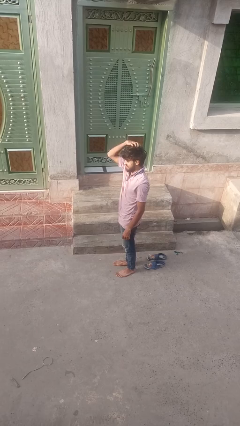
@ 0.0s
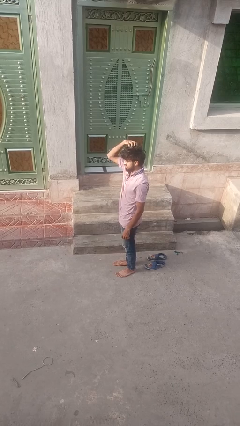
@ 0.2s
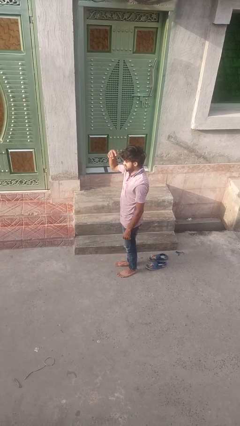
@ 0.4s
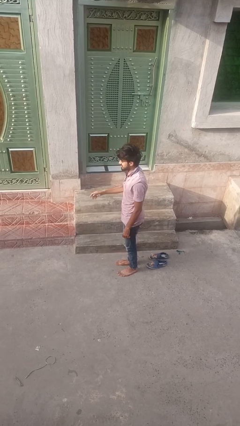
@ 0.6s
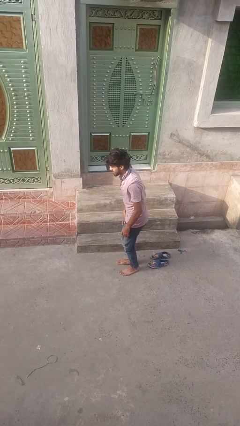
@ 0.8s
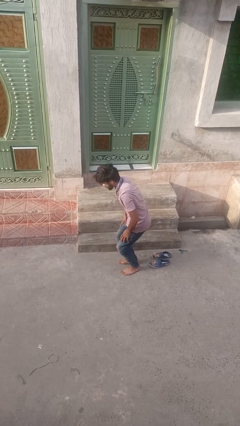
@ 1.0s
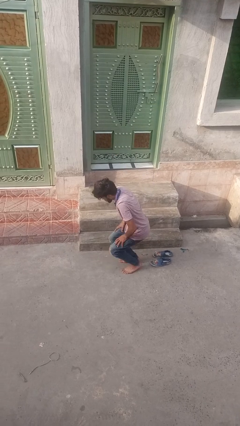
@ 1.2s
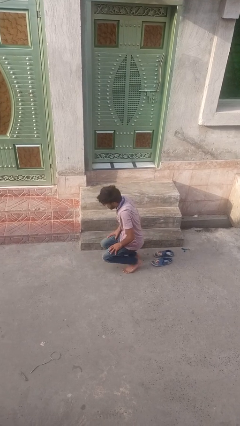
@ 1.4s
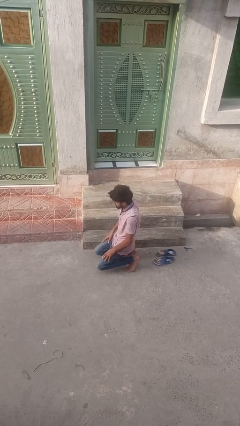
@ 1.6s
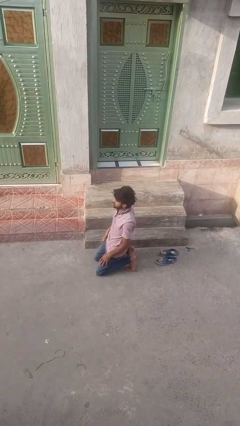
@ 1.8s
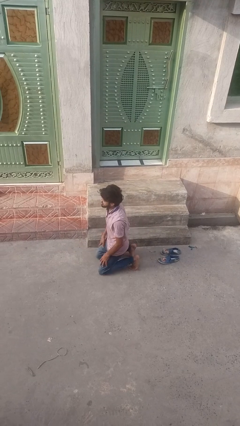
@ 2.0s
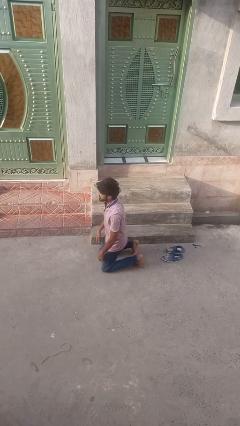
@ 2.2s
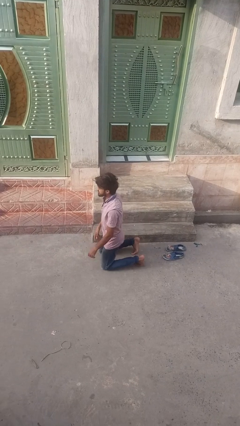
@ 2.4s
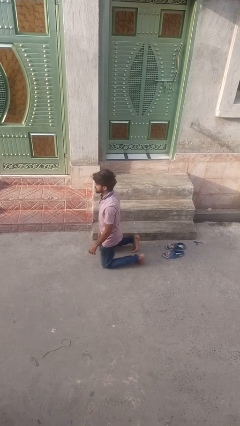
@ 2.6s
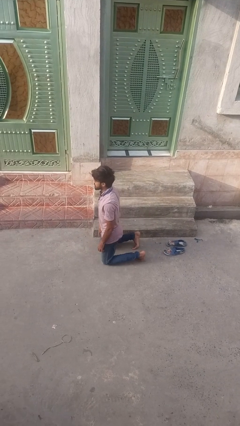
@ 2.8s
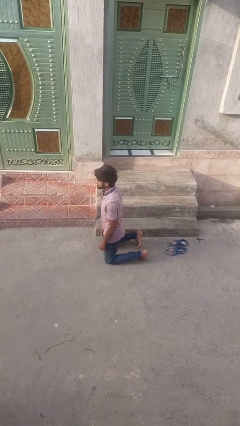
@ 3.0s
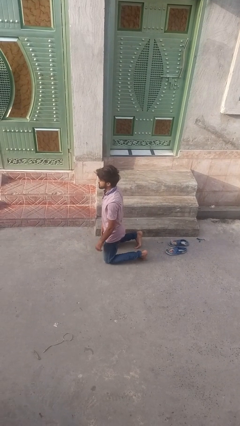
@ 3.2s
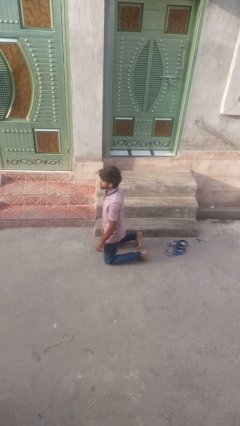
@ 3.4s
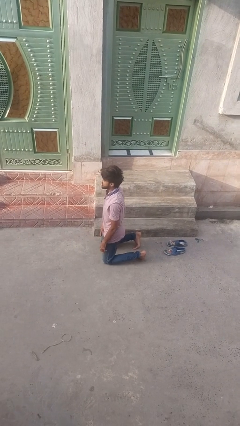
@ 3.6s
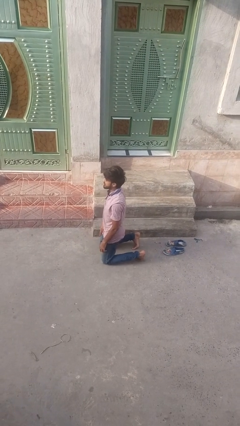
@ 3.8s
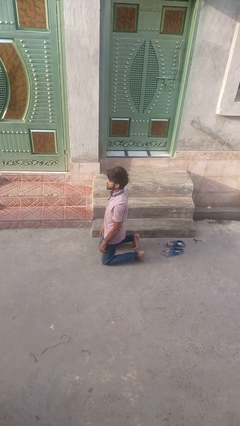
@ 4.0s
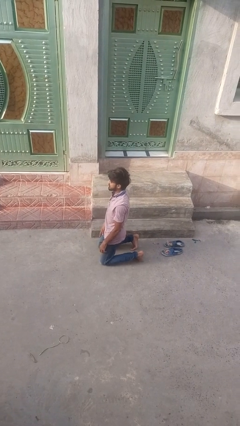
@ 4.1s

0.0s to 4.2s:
person kneels

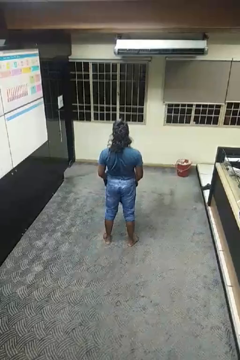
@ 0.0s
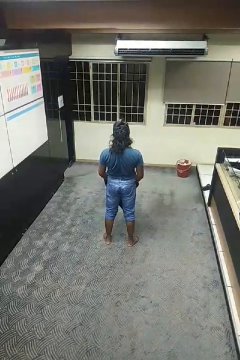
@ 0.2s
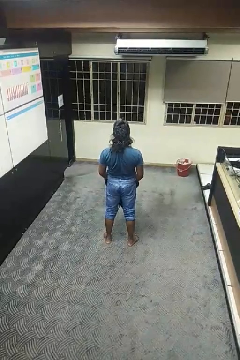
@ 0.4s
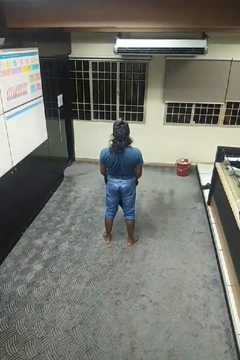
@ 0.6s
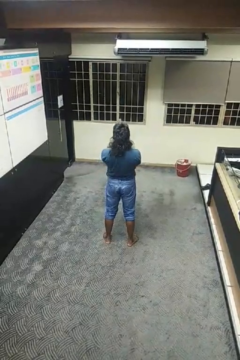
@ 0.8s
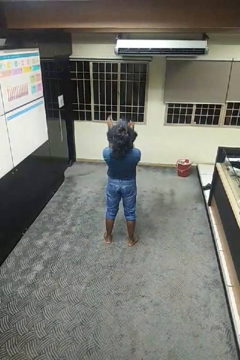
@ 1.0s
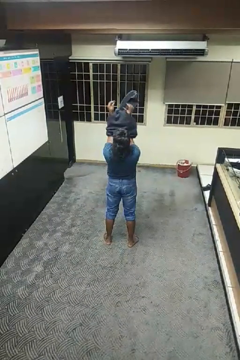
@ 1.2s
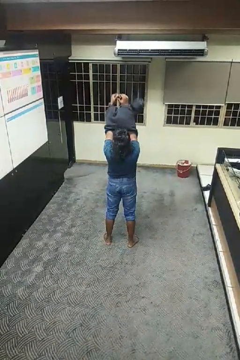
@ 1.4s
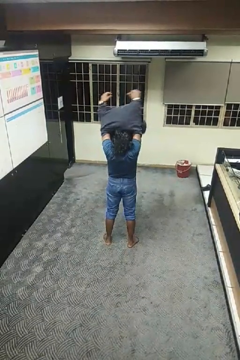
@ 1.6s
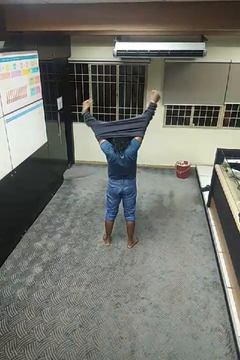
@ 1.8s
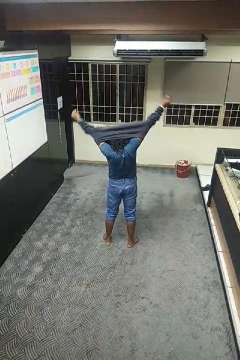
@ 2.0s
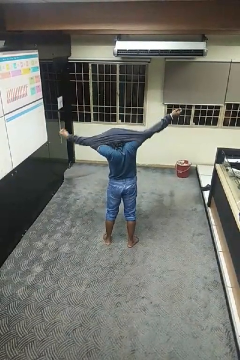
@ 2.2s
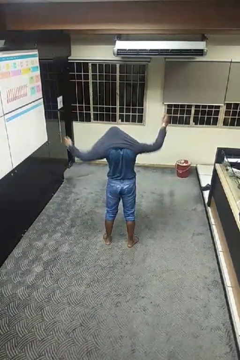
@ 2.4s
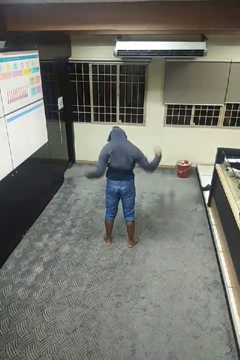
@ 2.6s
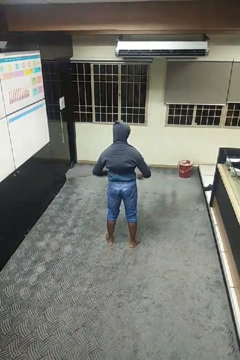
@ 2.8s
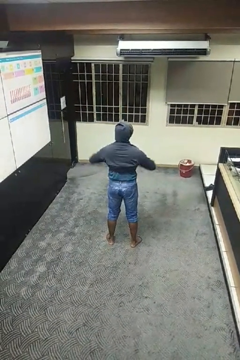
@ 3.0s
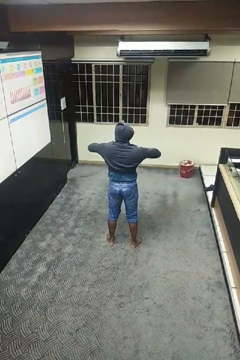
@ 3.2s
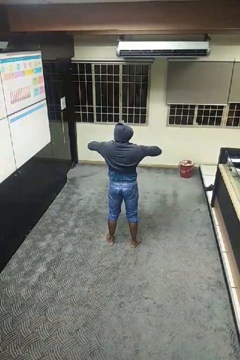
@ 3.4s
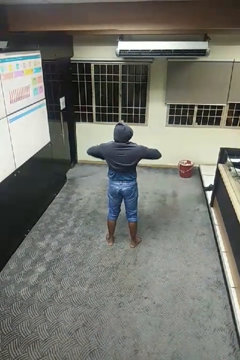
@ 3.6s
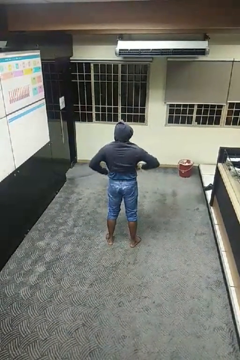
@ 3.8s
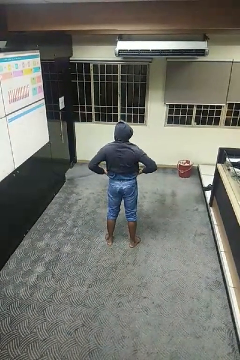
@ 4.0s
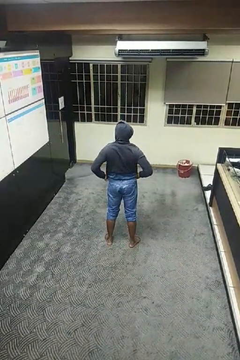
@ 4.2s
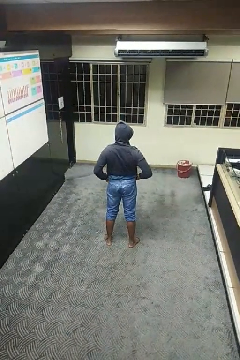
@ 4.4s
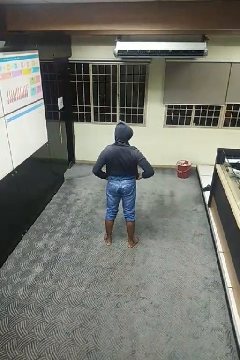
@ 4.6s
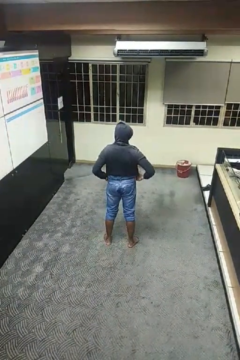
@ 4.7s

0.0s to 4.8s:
person puts on hoodie

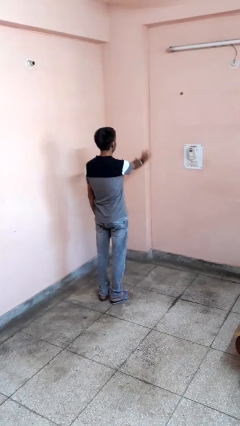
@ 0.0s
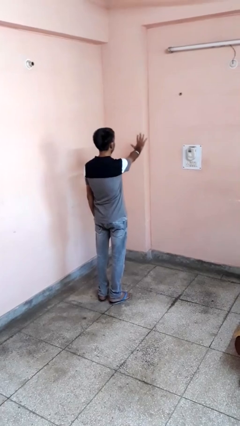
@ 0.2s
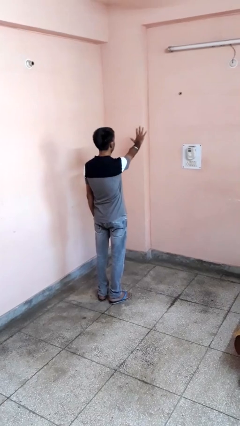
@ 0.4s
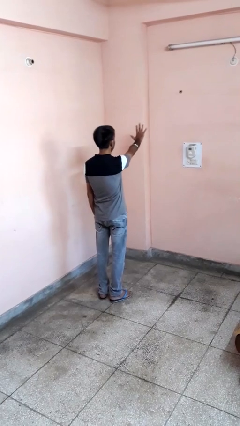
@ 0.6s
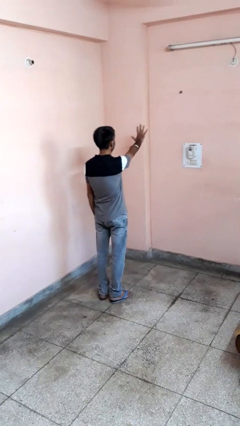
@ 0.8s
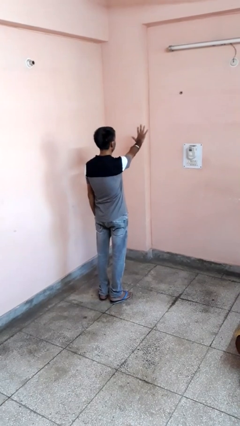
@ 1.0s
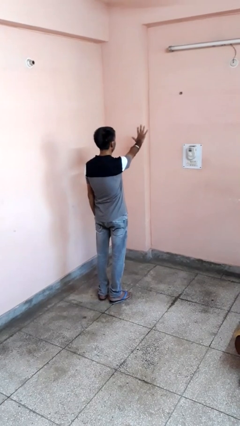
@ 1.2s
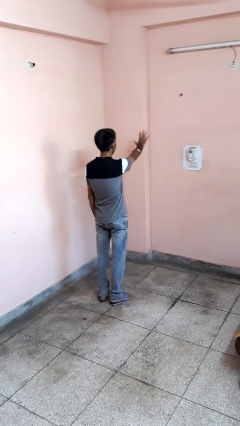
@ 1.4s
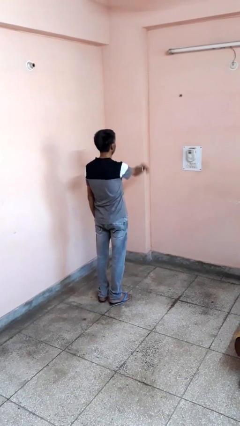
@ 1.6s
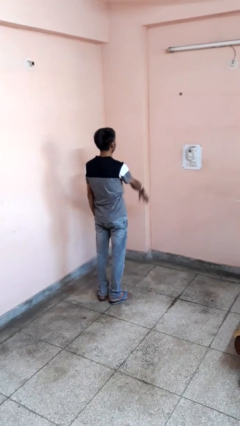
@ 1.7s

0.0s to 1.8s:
person gestures number five

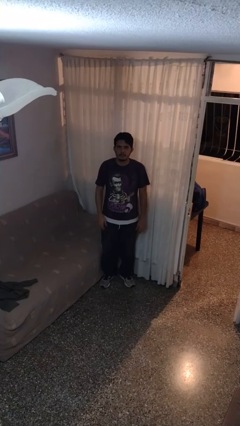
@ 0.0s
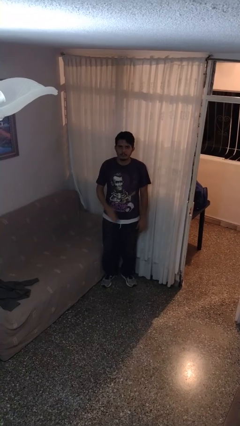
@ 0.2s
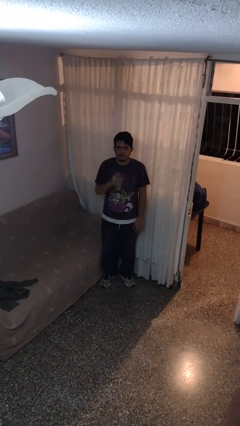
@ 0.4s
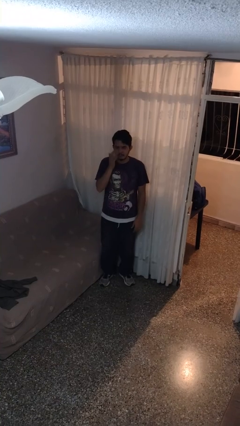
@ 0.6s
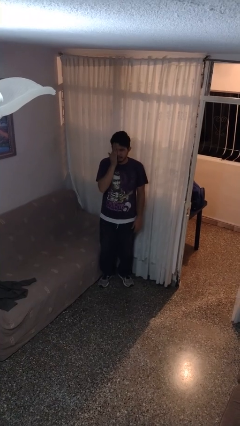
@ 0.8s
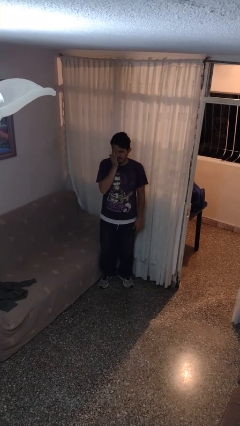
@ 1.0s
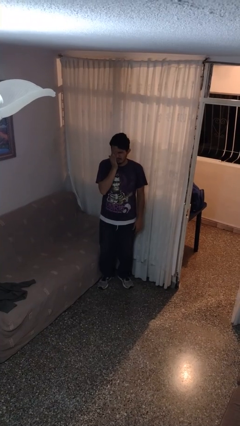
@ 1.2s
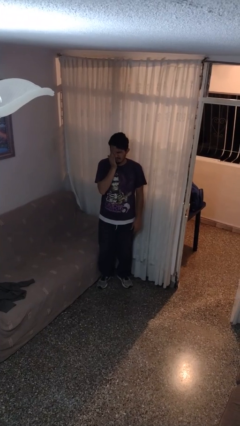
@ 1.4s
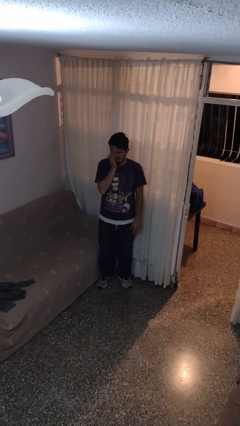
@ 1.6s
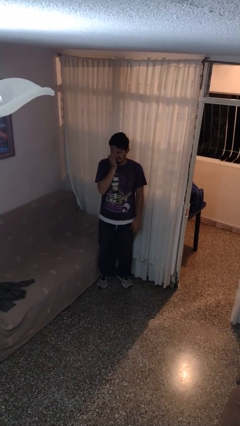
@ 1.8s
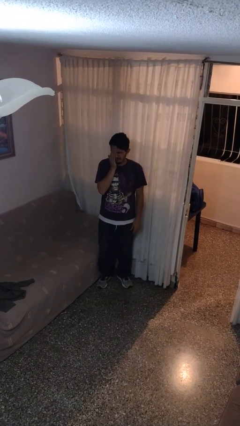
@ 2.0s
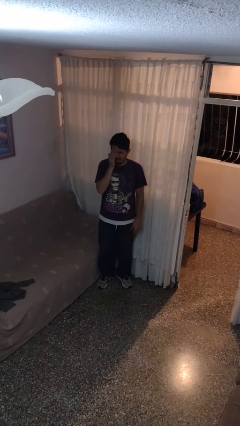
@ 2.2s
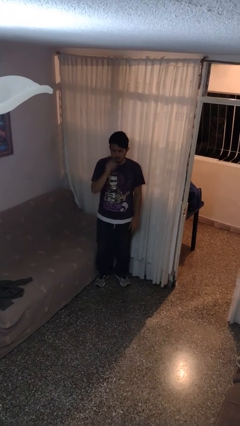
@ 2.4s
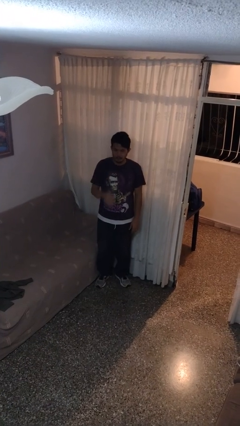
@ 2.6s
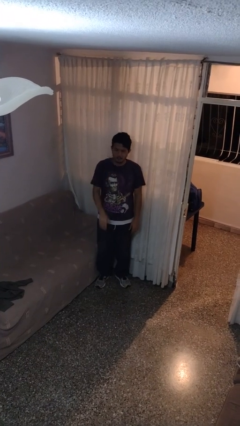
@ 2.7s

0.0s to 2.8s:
person rubs eyes

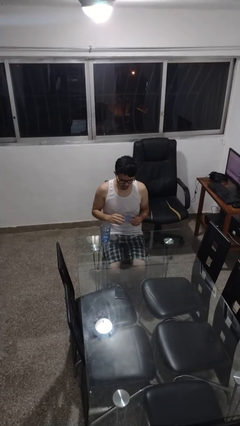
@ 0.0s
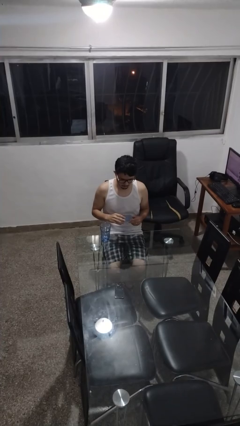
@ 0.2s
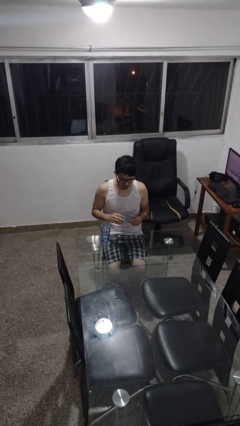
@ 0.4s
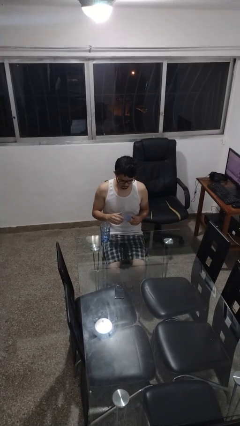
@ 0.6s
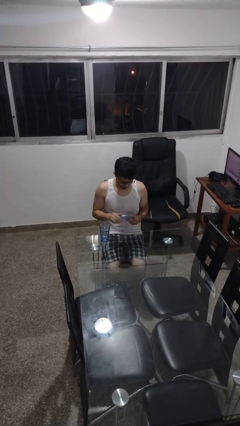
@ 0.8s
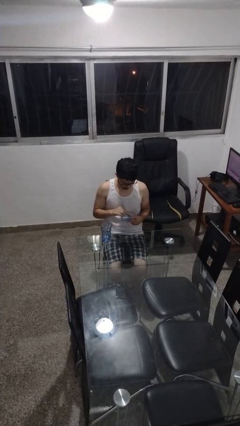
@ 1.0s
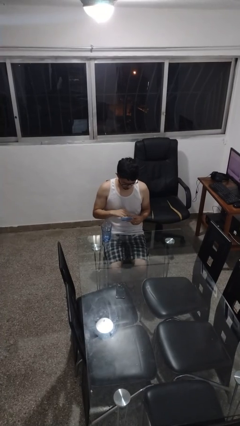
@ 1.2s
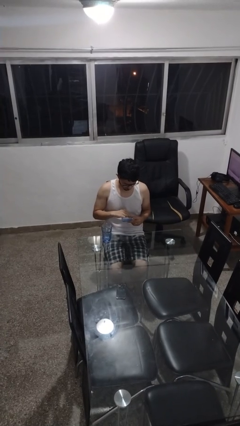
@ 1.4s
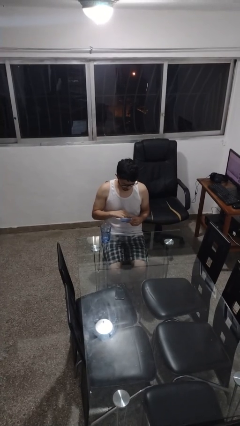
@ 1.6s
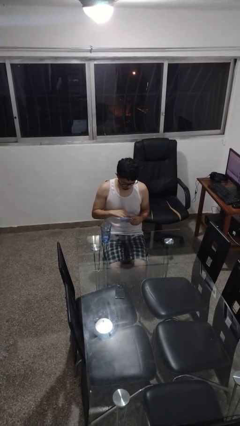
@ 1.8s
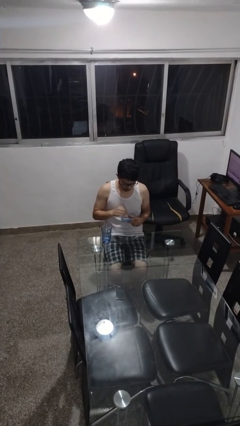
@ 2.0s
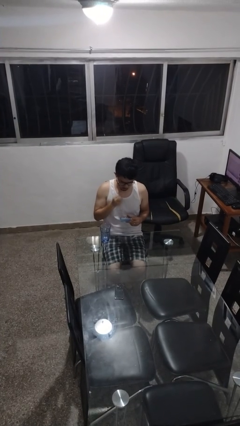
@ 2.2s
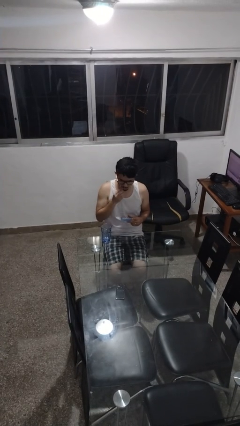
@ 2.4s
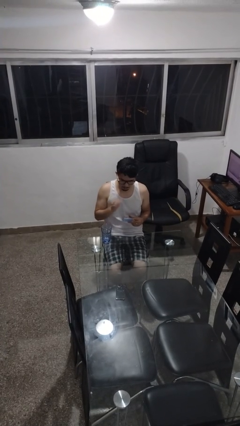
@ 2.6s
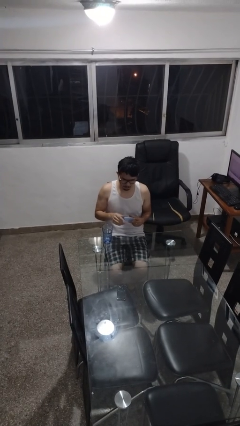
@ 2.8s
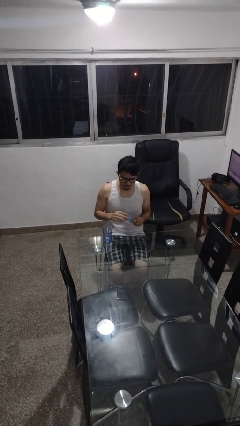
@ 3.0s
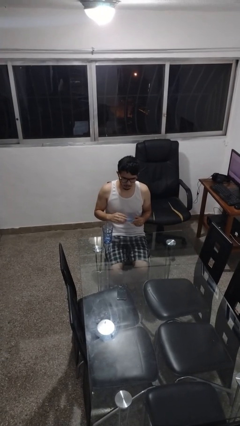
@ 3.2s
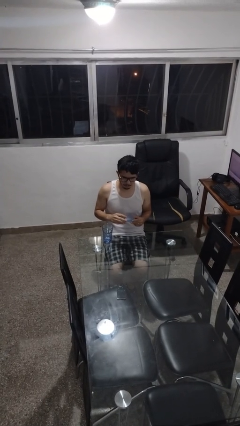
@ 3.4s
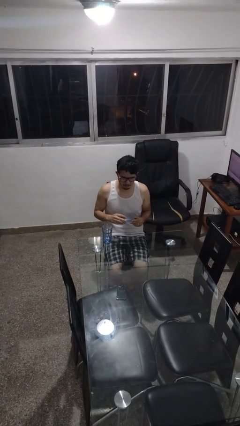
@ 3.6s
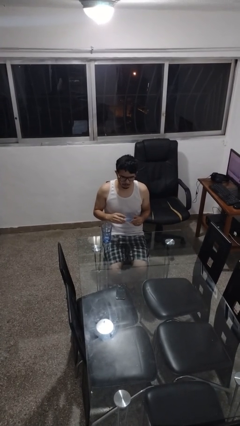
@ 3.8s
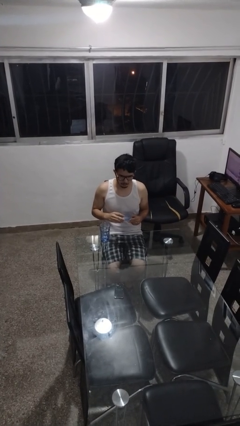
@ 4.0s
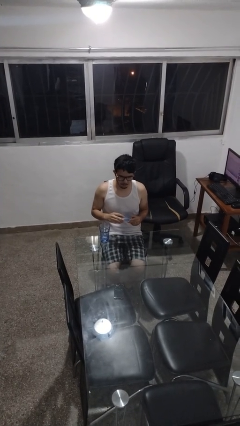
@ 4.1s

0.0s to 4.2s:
person takes medicine pills

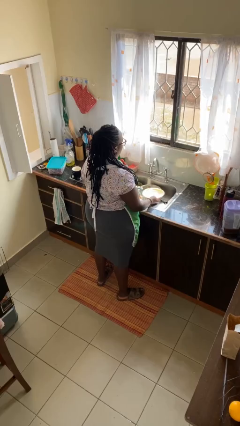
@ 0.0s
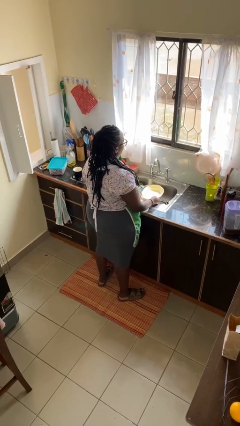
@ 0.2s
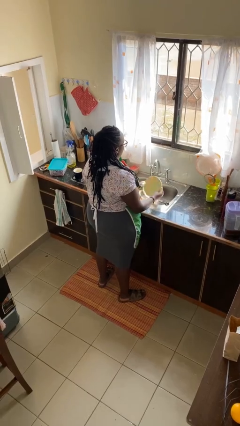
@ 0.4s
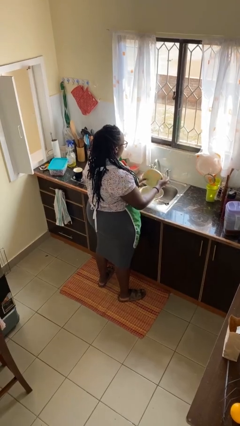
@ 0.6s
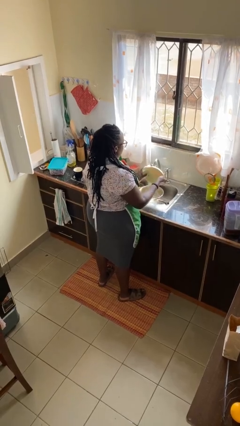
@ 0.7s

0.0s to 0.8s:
person washes dish
